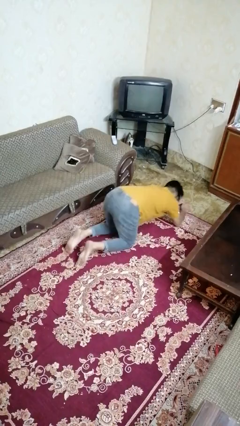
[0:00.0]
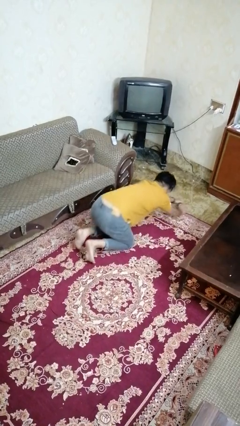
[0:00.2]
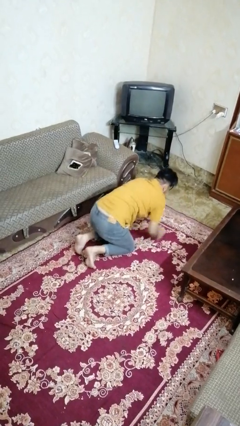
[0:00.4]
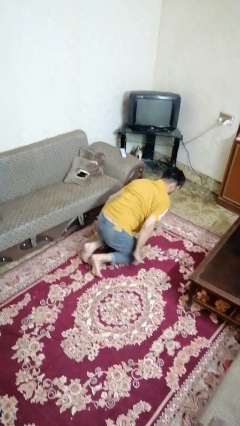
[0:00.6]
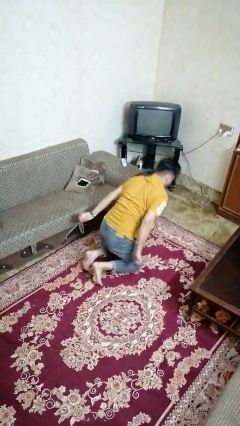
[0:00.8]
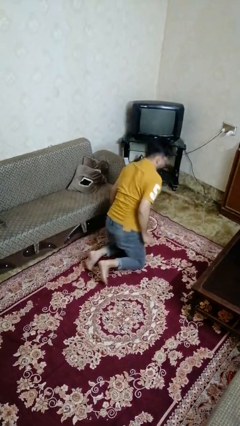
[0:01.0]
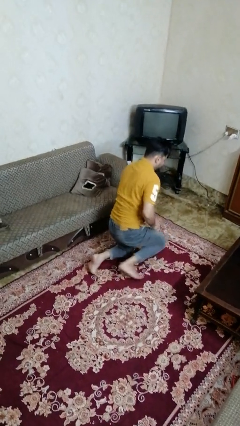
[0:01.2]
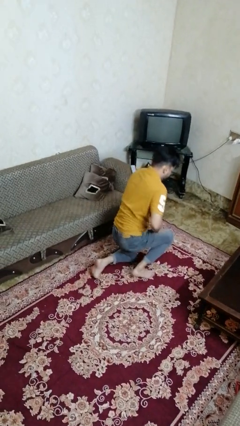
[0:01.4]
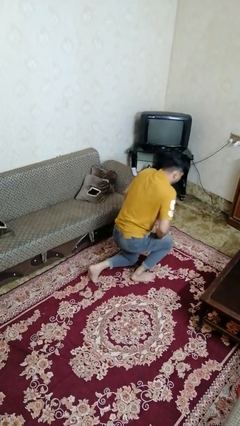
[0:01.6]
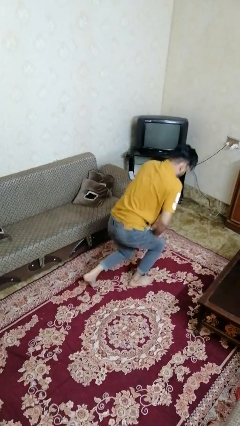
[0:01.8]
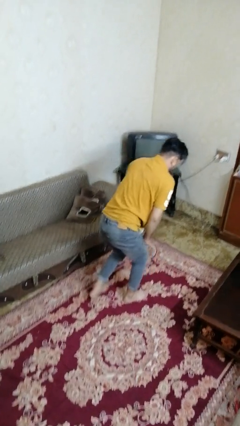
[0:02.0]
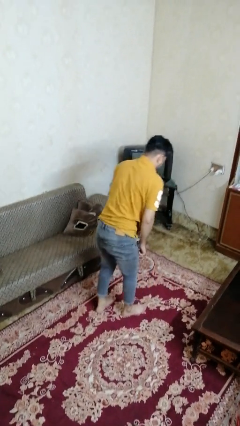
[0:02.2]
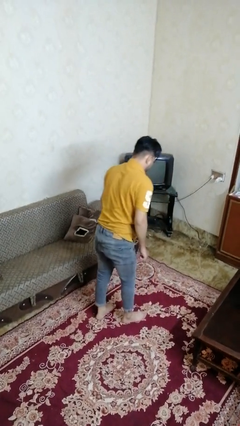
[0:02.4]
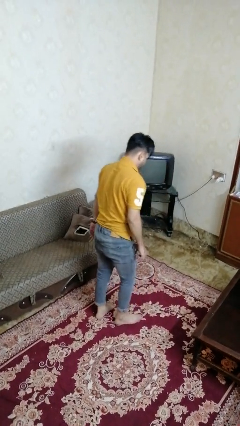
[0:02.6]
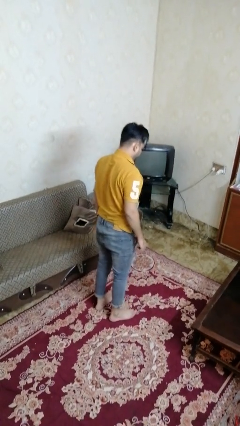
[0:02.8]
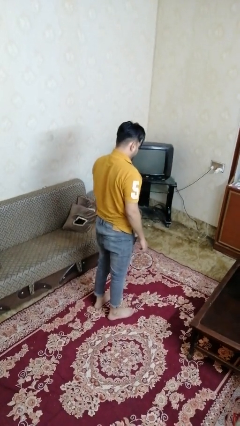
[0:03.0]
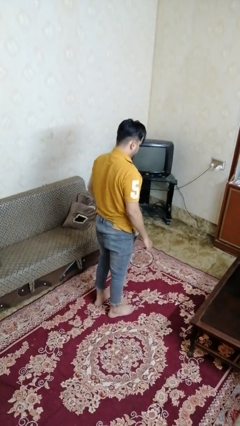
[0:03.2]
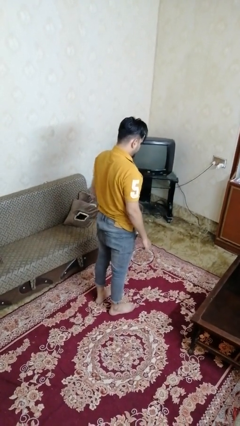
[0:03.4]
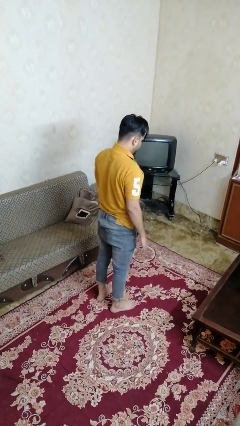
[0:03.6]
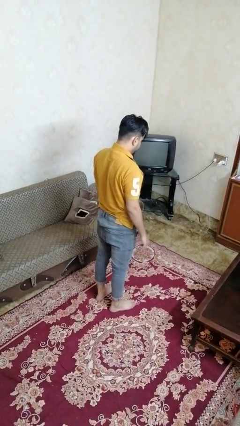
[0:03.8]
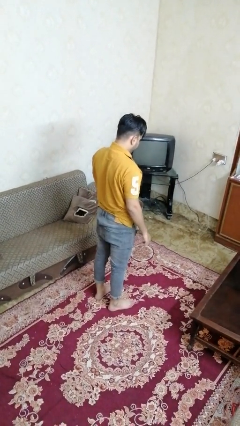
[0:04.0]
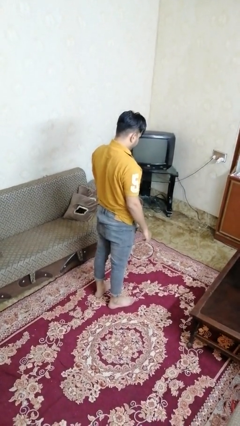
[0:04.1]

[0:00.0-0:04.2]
person stands up from floor

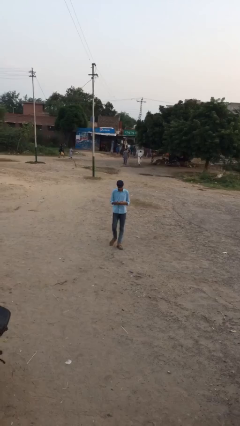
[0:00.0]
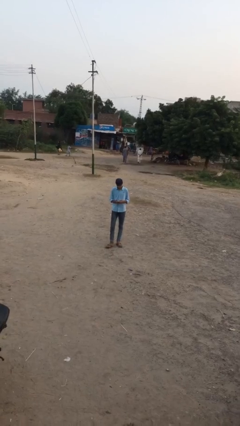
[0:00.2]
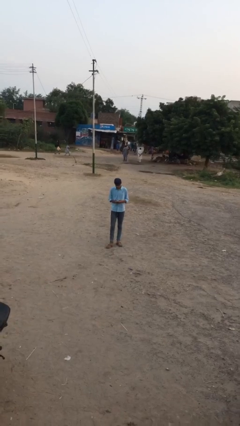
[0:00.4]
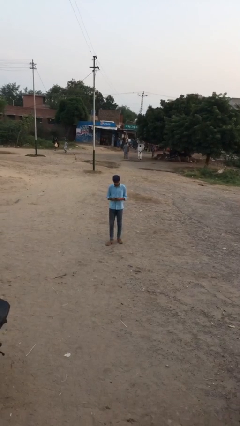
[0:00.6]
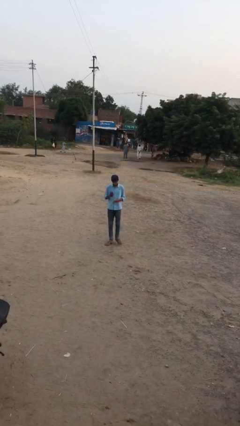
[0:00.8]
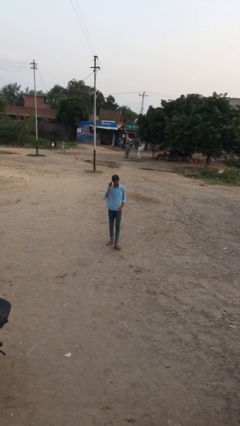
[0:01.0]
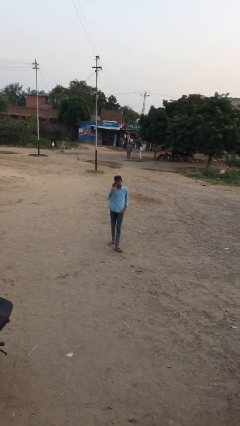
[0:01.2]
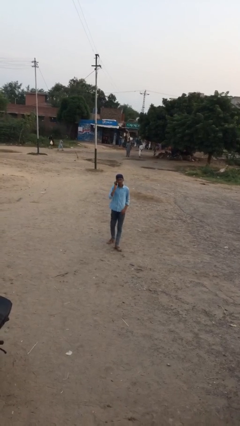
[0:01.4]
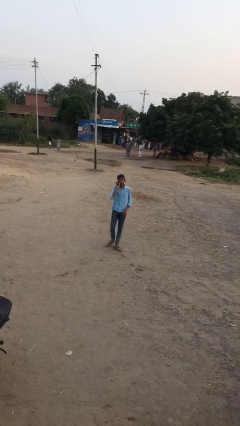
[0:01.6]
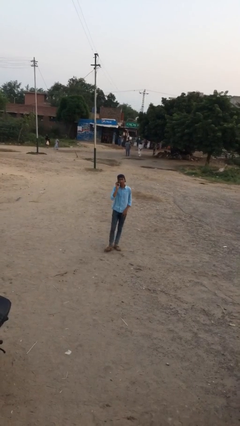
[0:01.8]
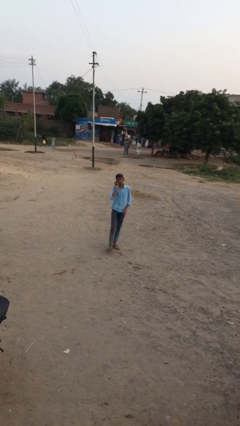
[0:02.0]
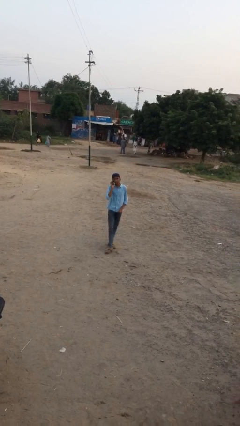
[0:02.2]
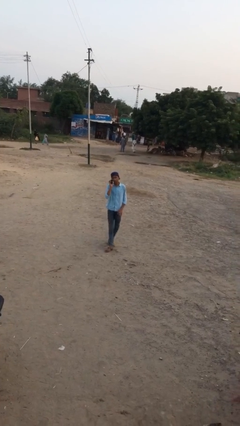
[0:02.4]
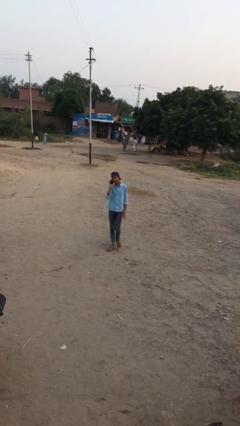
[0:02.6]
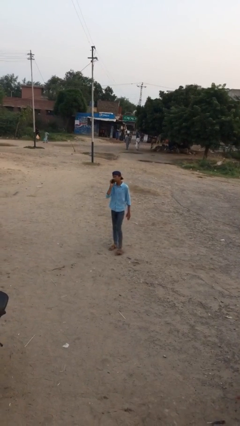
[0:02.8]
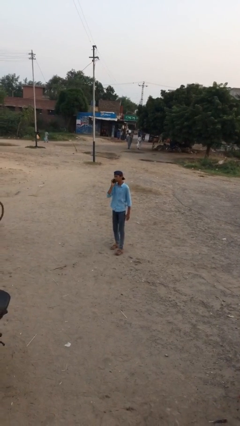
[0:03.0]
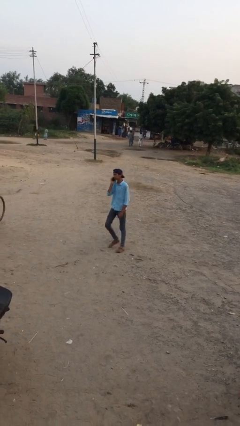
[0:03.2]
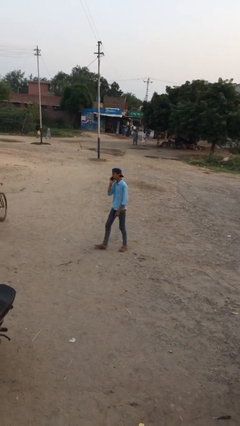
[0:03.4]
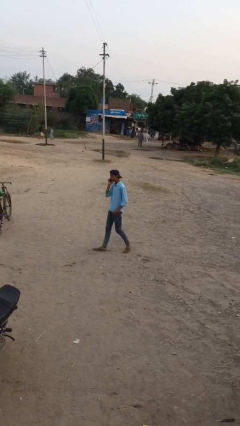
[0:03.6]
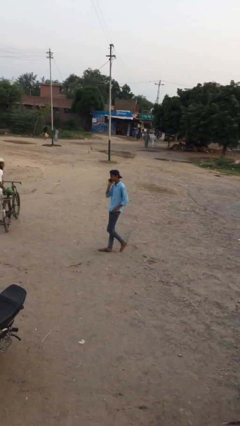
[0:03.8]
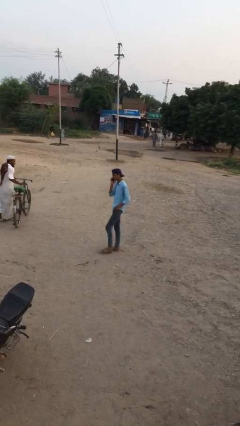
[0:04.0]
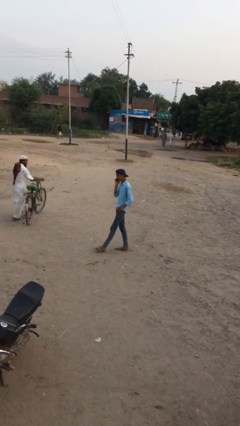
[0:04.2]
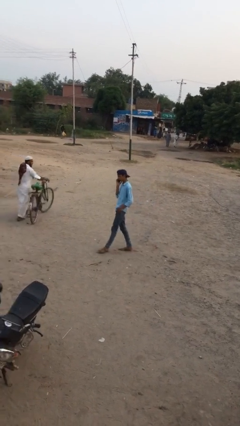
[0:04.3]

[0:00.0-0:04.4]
person talks on phone

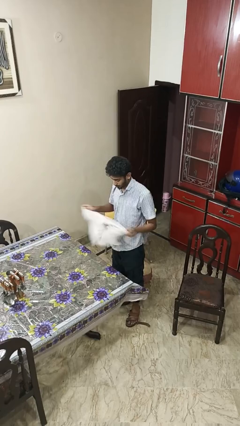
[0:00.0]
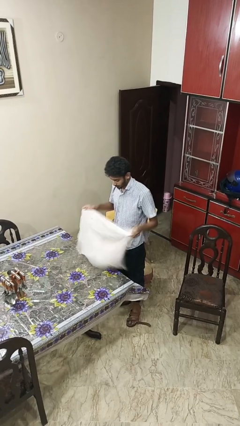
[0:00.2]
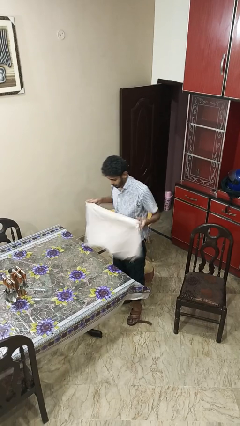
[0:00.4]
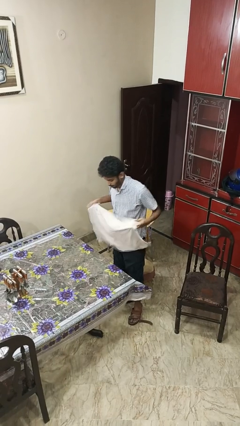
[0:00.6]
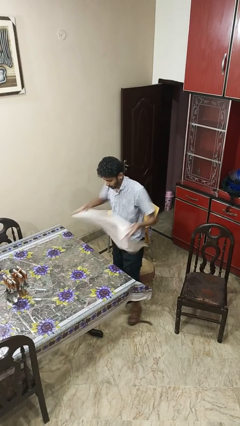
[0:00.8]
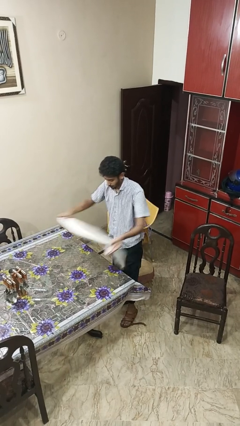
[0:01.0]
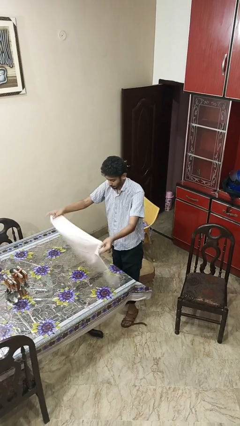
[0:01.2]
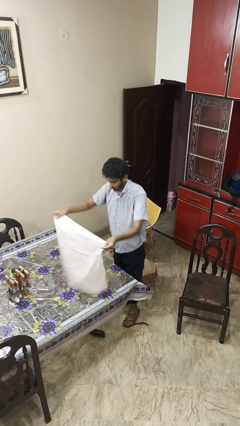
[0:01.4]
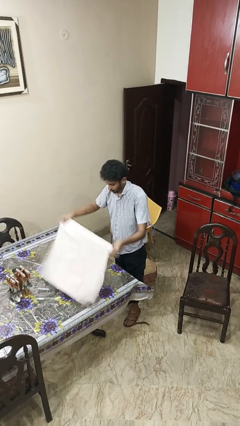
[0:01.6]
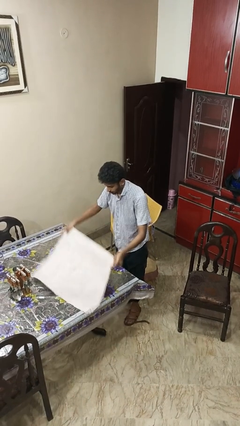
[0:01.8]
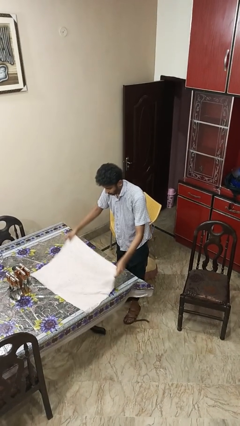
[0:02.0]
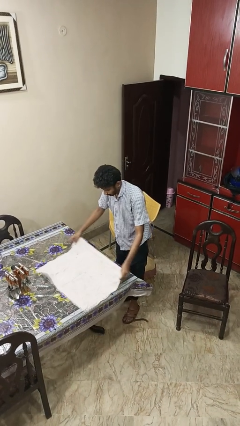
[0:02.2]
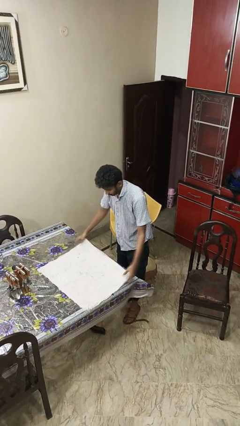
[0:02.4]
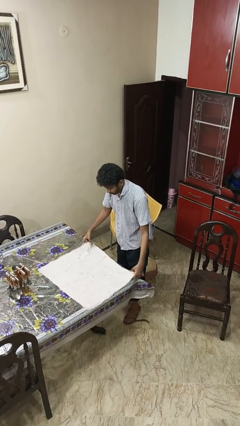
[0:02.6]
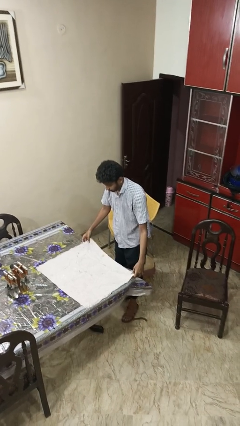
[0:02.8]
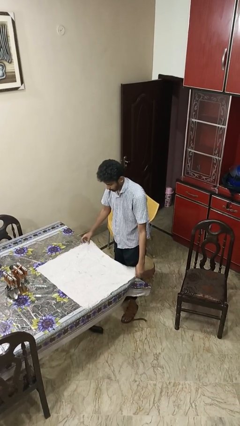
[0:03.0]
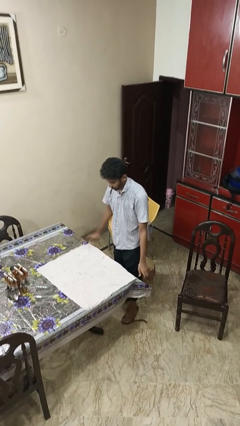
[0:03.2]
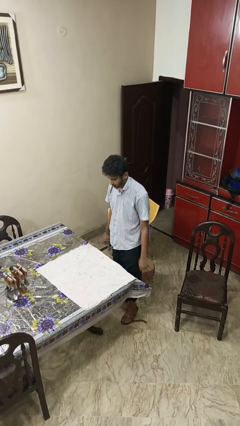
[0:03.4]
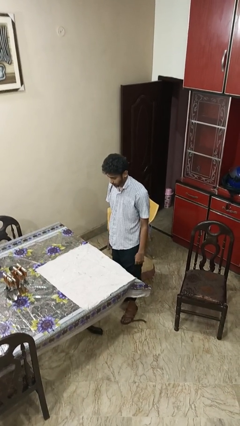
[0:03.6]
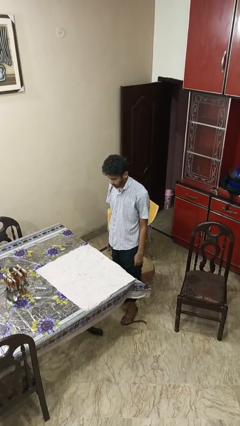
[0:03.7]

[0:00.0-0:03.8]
person spreads tablecloth

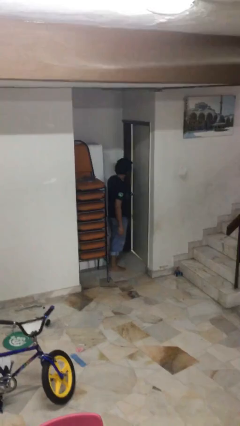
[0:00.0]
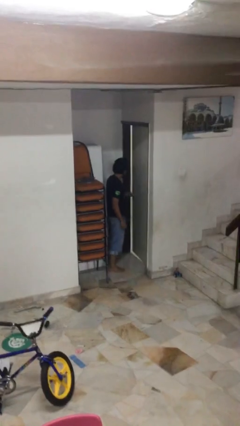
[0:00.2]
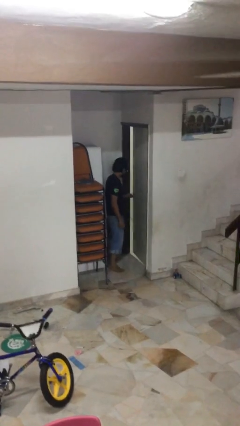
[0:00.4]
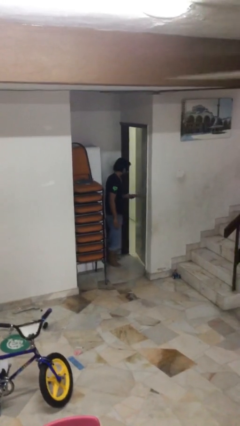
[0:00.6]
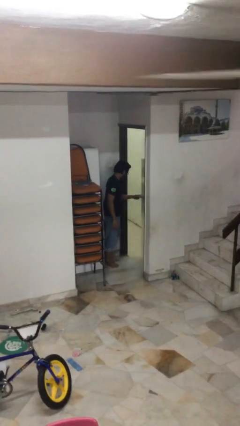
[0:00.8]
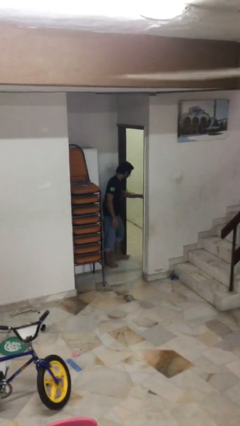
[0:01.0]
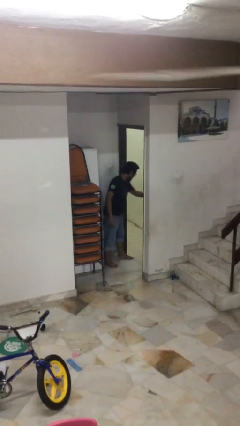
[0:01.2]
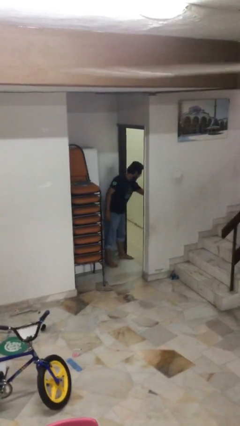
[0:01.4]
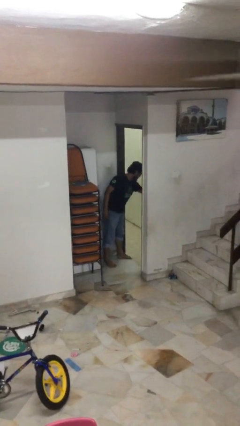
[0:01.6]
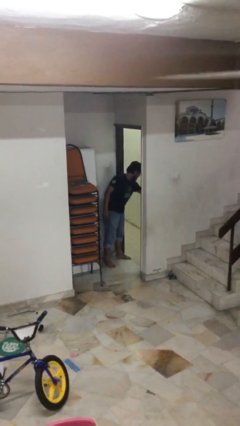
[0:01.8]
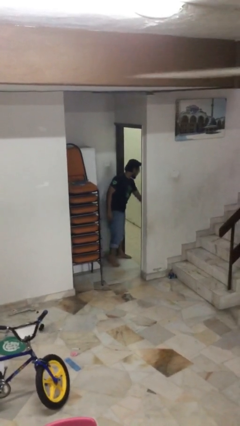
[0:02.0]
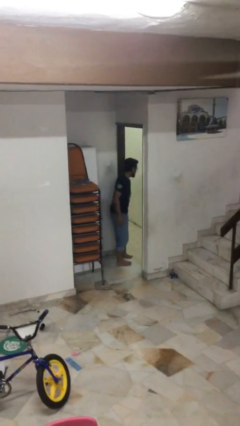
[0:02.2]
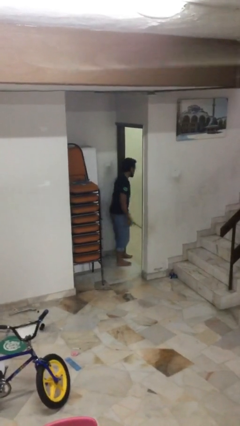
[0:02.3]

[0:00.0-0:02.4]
person opens facility door

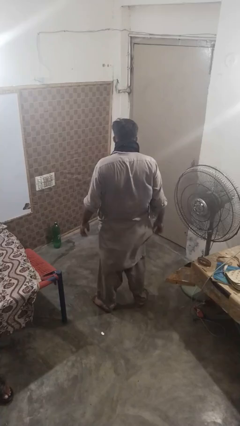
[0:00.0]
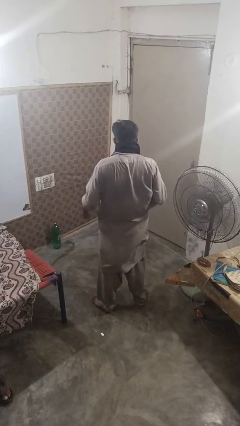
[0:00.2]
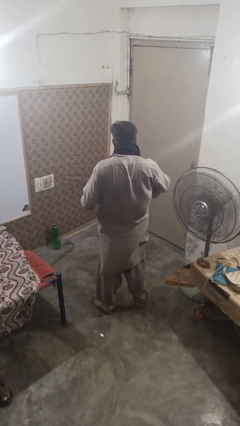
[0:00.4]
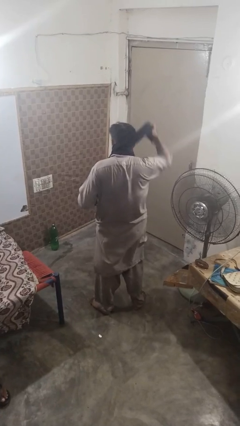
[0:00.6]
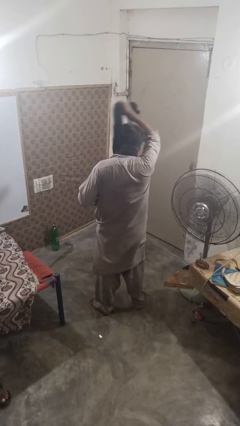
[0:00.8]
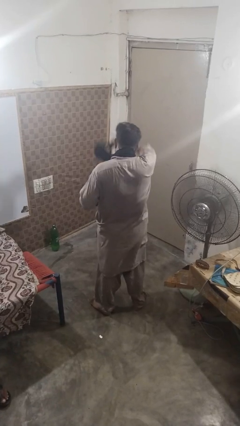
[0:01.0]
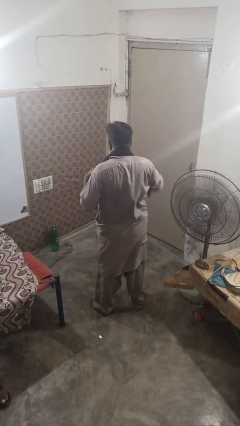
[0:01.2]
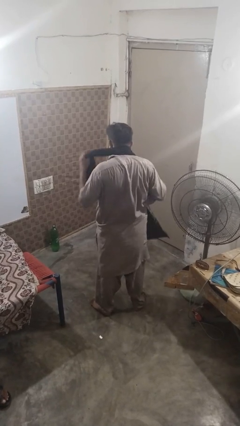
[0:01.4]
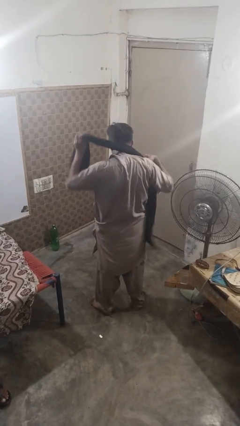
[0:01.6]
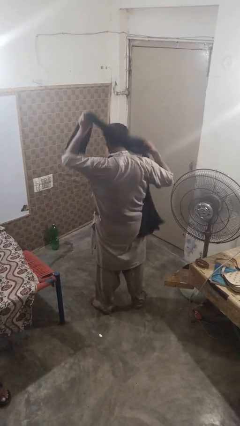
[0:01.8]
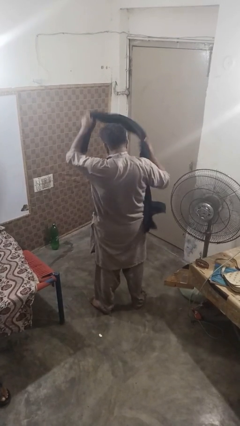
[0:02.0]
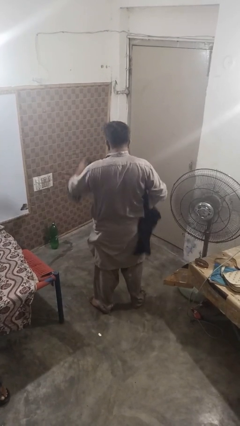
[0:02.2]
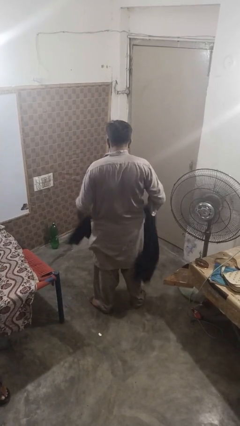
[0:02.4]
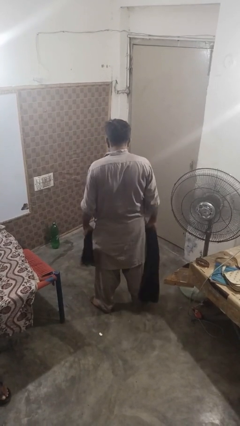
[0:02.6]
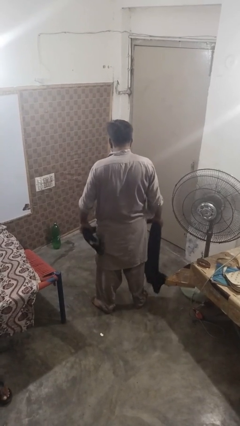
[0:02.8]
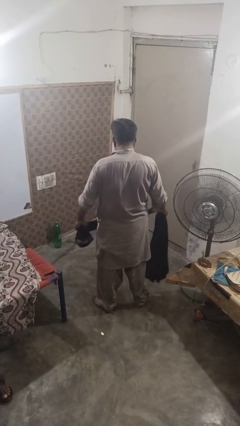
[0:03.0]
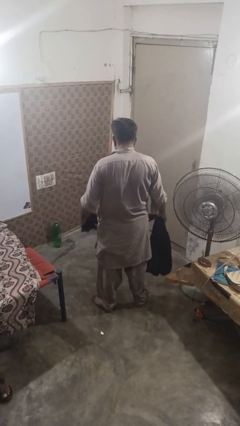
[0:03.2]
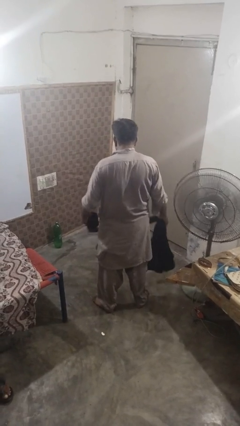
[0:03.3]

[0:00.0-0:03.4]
person takes off scarf
